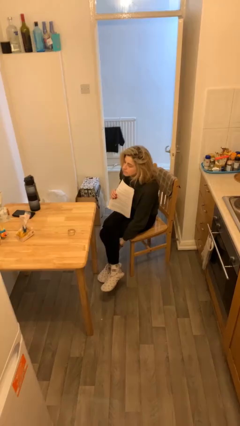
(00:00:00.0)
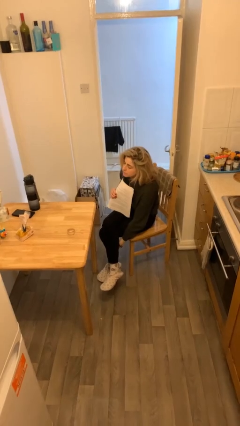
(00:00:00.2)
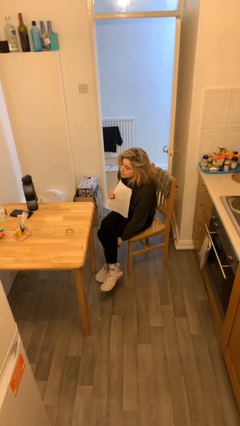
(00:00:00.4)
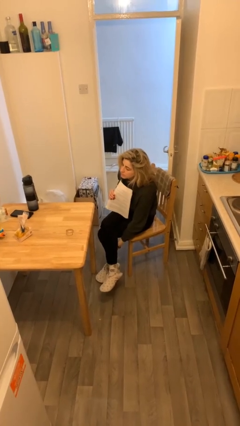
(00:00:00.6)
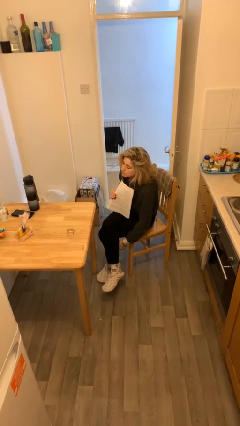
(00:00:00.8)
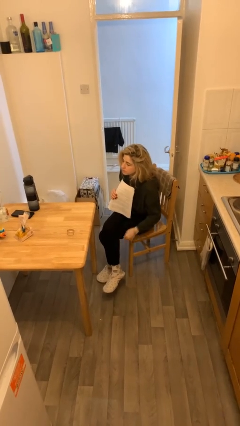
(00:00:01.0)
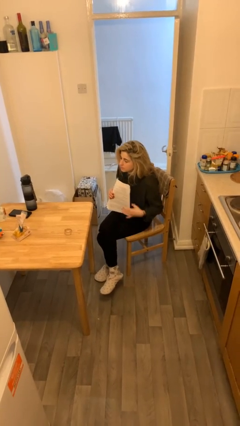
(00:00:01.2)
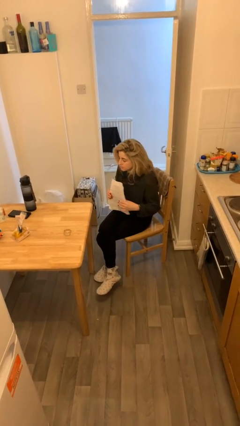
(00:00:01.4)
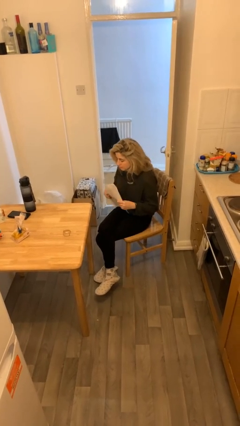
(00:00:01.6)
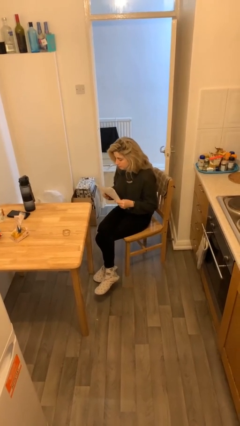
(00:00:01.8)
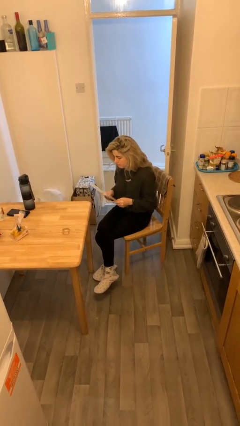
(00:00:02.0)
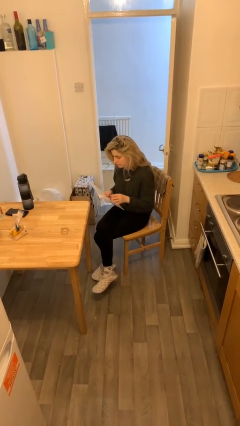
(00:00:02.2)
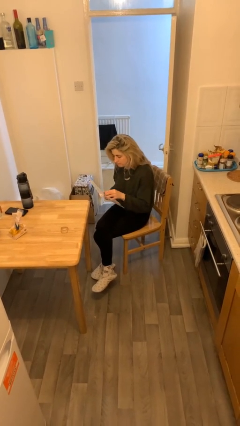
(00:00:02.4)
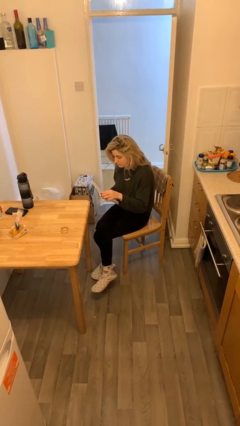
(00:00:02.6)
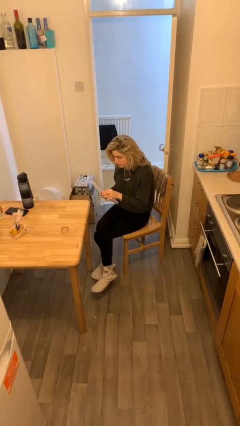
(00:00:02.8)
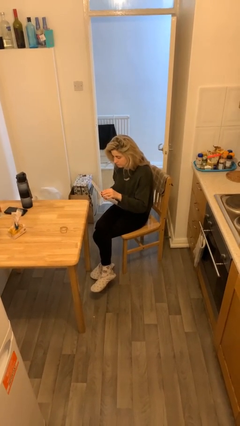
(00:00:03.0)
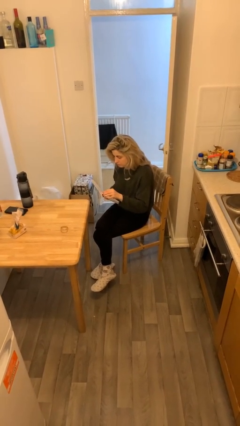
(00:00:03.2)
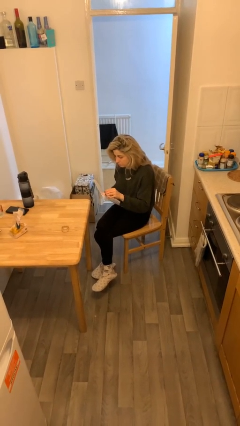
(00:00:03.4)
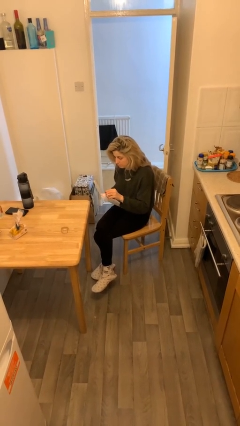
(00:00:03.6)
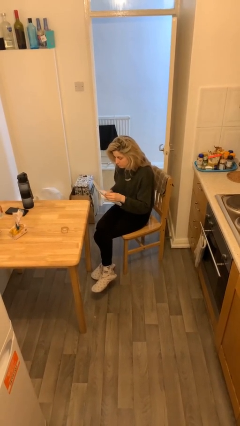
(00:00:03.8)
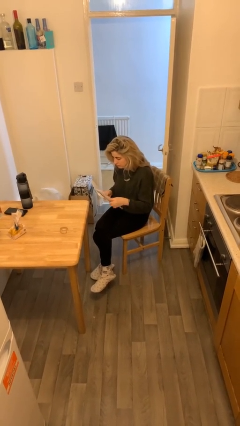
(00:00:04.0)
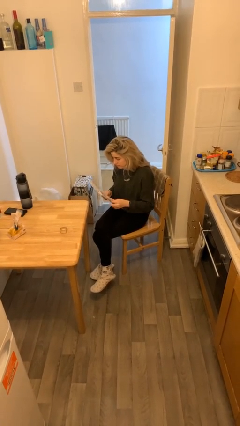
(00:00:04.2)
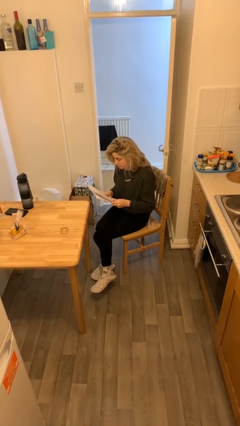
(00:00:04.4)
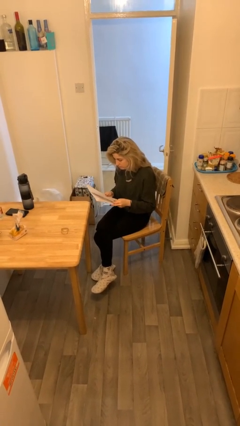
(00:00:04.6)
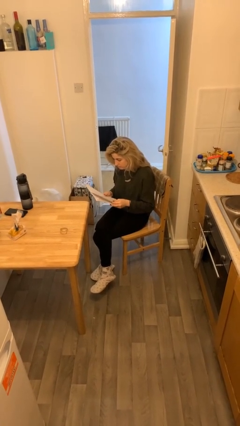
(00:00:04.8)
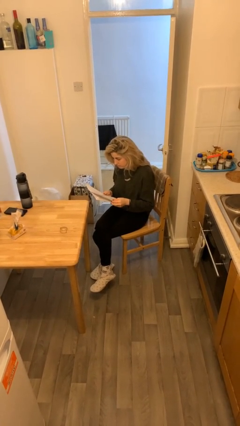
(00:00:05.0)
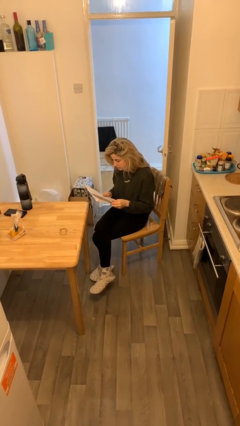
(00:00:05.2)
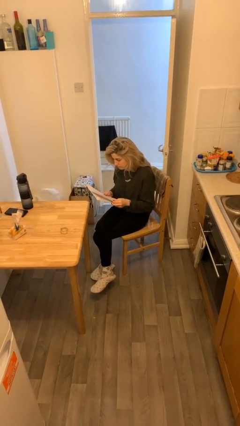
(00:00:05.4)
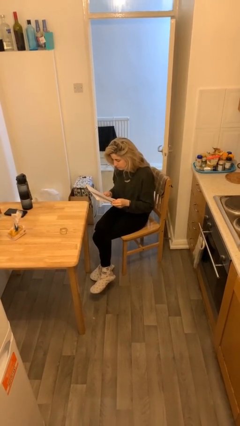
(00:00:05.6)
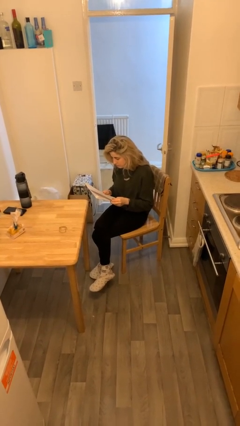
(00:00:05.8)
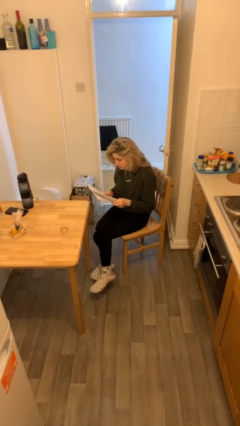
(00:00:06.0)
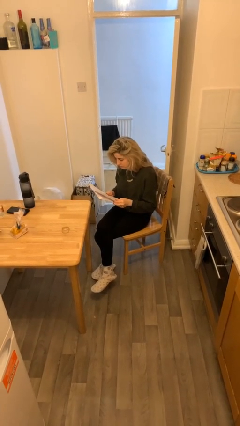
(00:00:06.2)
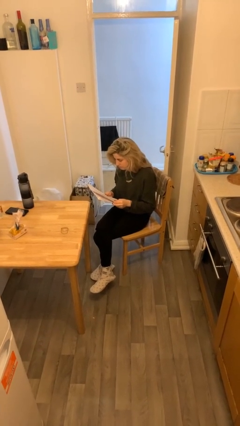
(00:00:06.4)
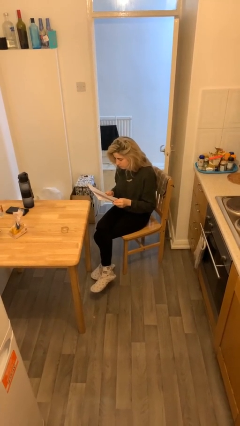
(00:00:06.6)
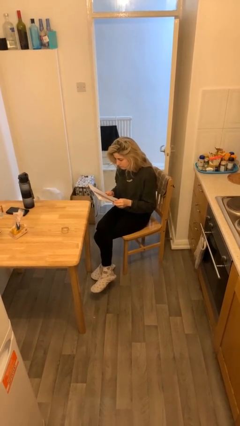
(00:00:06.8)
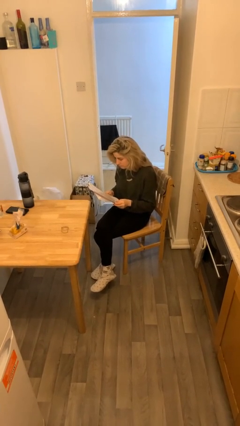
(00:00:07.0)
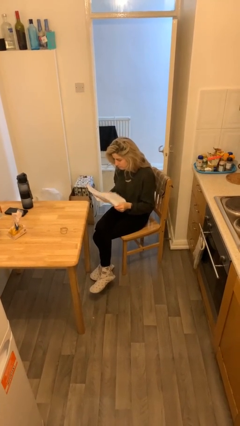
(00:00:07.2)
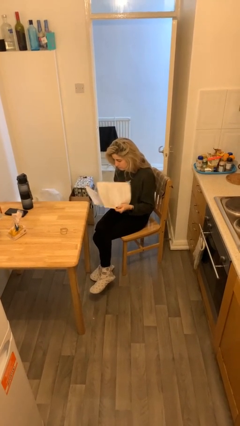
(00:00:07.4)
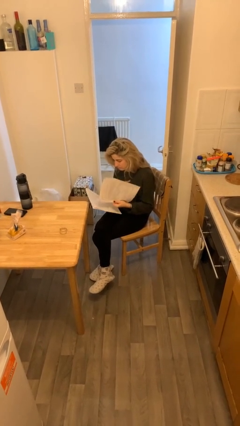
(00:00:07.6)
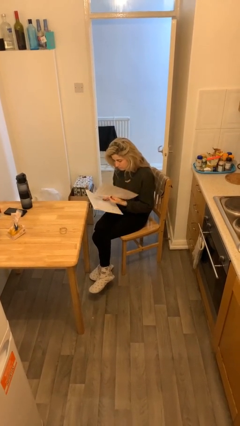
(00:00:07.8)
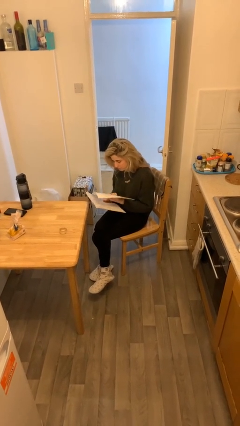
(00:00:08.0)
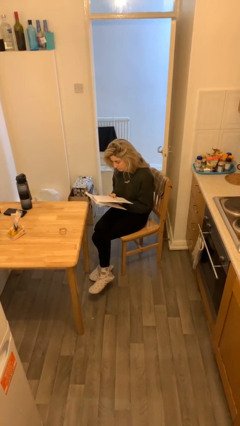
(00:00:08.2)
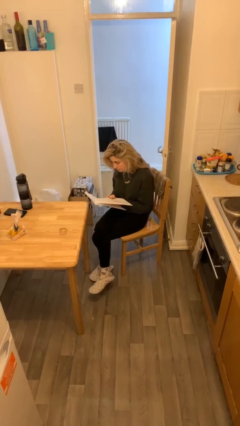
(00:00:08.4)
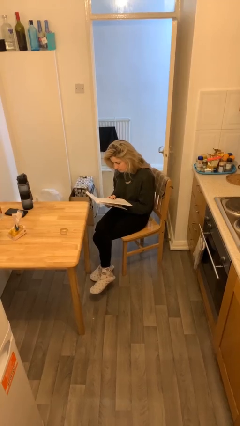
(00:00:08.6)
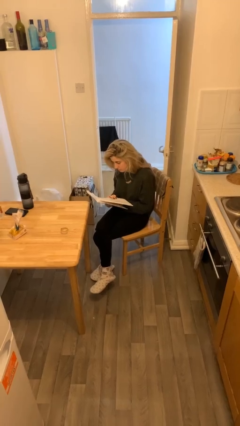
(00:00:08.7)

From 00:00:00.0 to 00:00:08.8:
person reads document

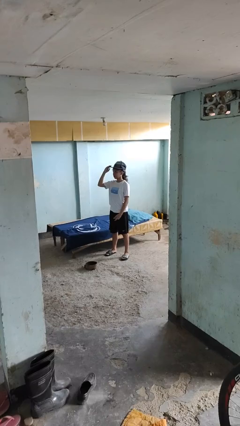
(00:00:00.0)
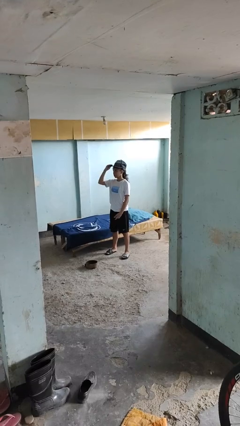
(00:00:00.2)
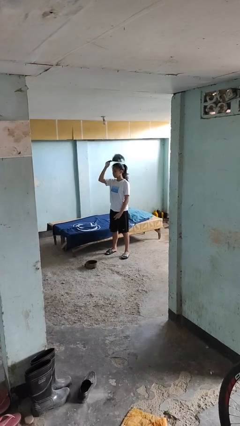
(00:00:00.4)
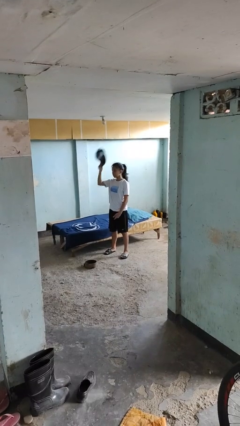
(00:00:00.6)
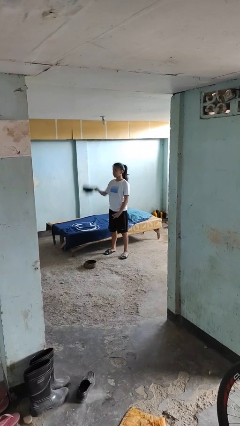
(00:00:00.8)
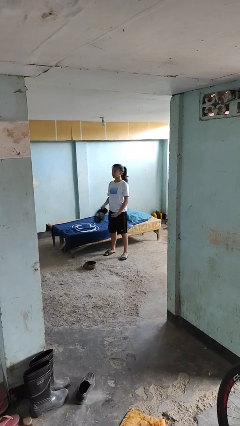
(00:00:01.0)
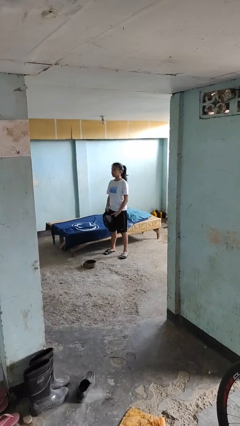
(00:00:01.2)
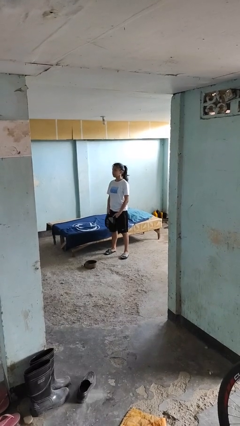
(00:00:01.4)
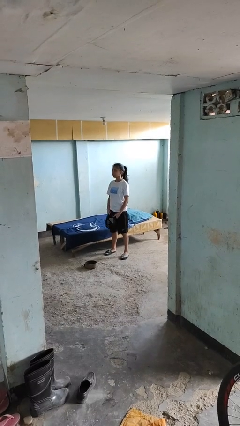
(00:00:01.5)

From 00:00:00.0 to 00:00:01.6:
person takes off hat

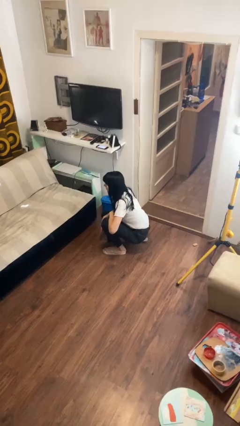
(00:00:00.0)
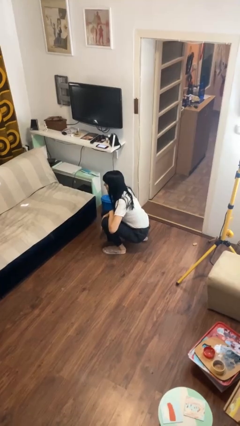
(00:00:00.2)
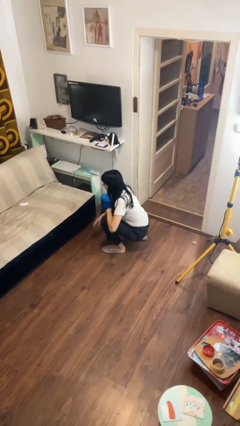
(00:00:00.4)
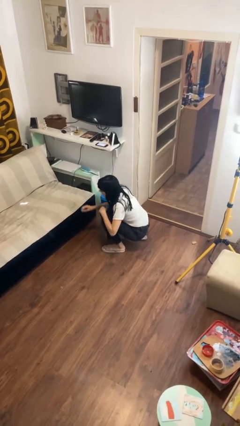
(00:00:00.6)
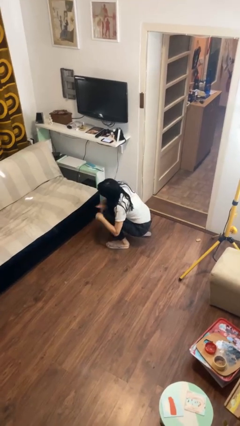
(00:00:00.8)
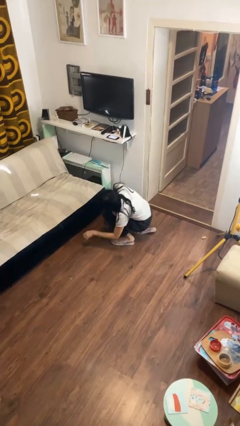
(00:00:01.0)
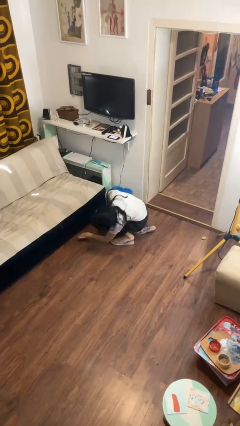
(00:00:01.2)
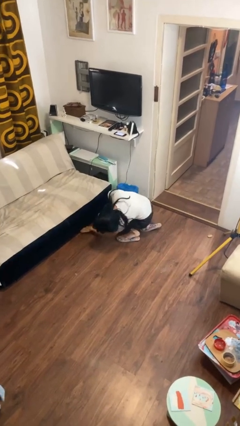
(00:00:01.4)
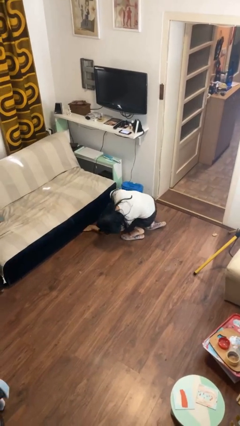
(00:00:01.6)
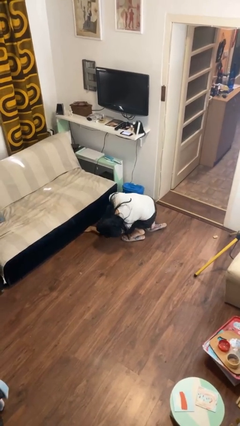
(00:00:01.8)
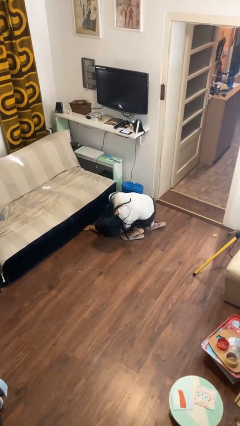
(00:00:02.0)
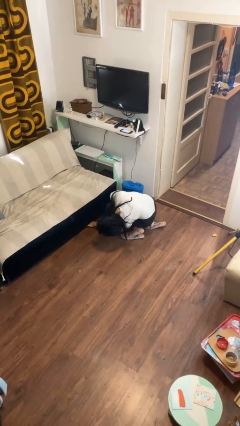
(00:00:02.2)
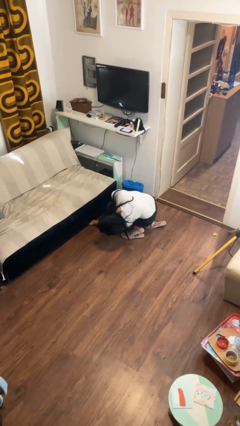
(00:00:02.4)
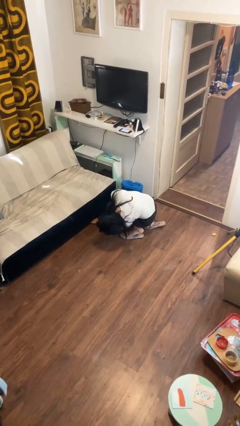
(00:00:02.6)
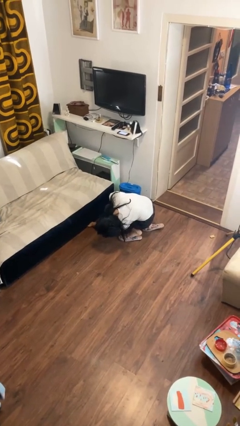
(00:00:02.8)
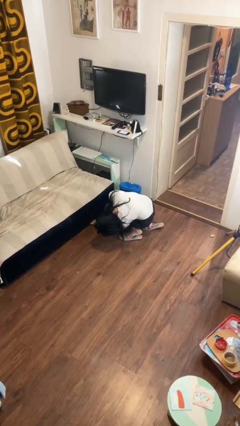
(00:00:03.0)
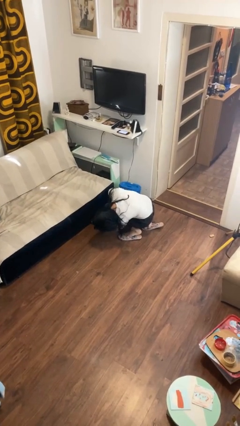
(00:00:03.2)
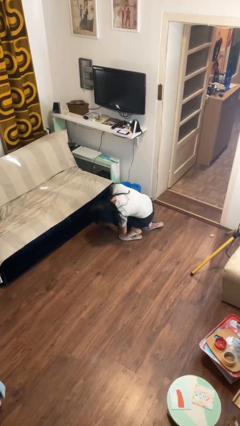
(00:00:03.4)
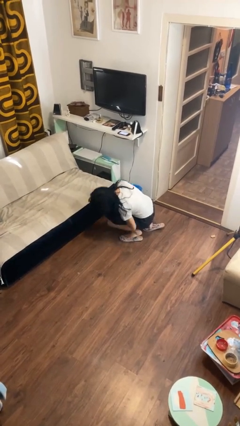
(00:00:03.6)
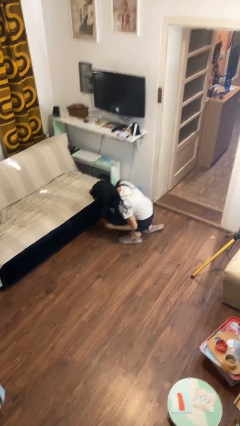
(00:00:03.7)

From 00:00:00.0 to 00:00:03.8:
person searches under couch

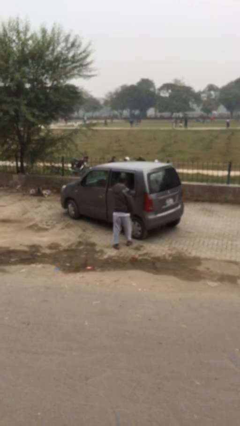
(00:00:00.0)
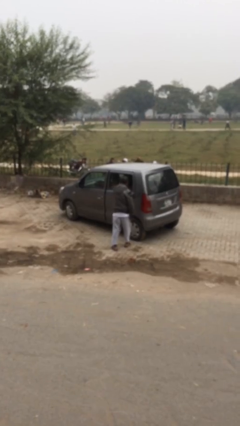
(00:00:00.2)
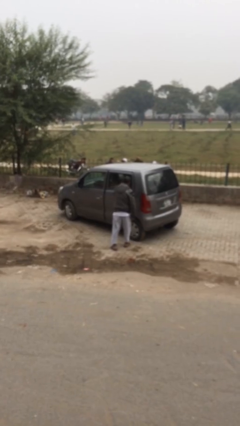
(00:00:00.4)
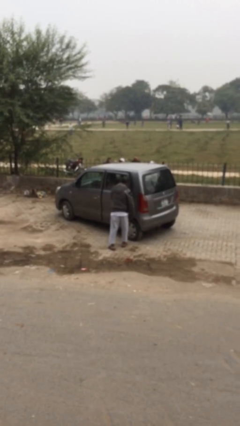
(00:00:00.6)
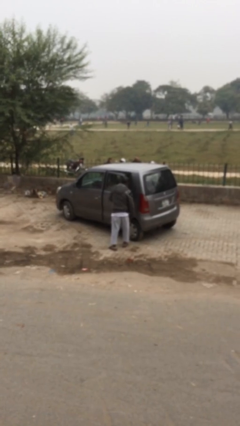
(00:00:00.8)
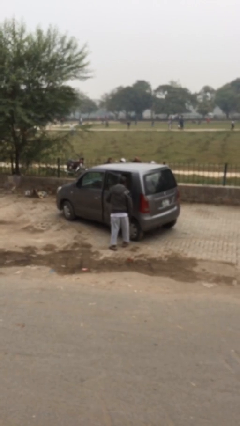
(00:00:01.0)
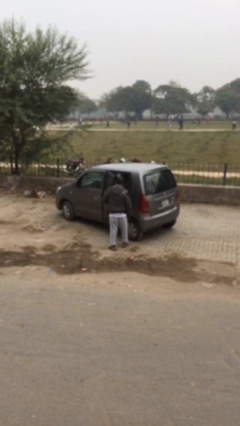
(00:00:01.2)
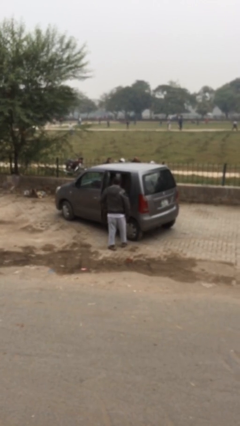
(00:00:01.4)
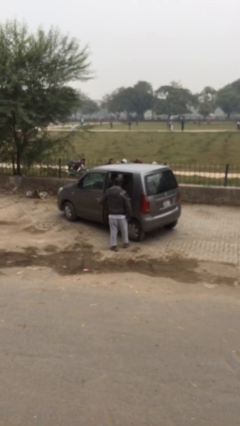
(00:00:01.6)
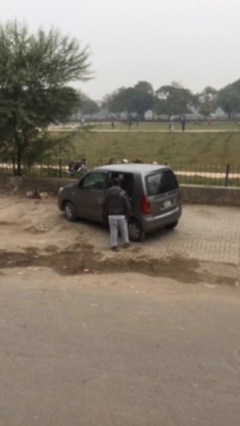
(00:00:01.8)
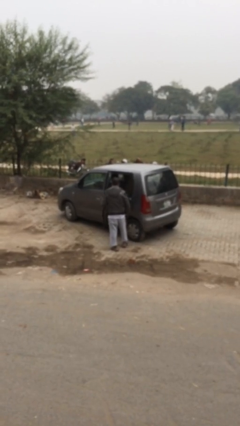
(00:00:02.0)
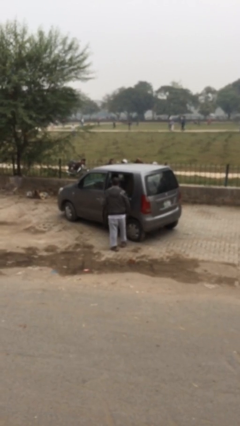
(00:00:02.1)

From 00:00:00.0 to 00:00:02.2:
person opens car door

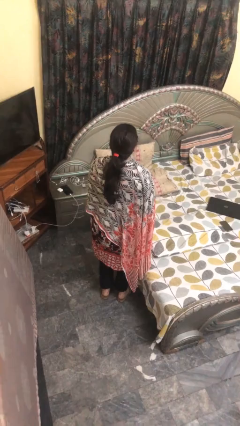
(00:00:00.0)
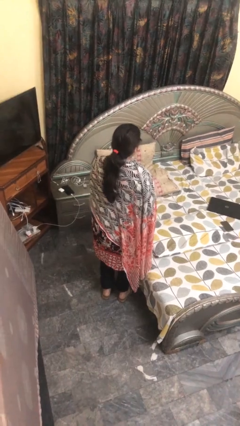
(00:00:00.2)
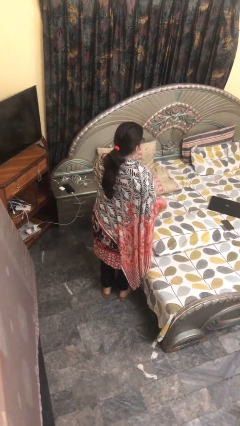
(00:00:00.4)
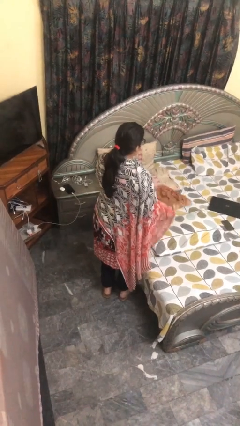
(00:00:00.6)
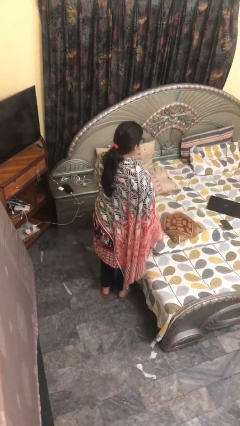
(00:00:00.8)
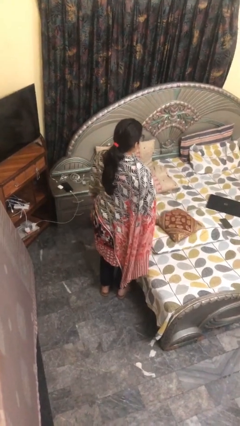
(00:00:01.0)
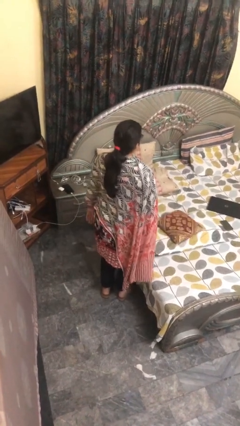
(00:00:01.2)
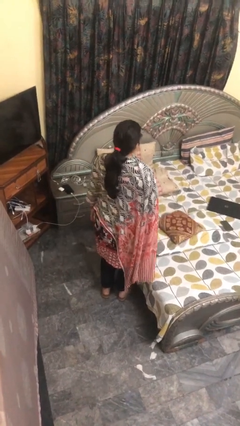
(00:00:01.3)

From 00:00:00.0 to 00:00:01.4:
person throws object on bed
